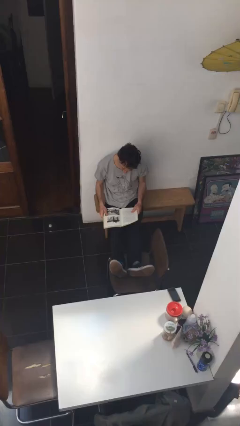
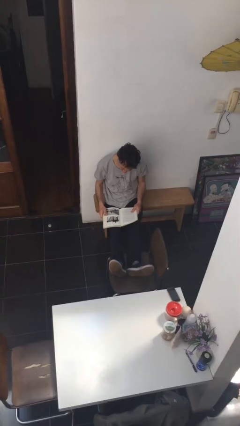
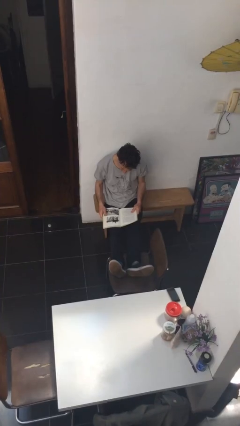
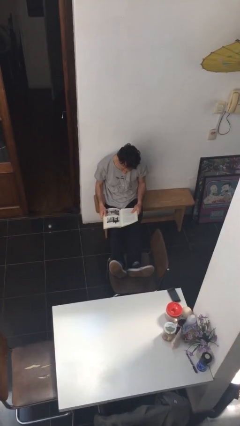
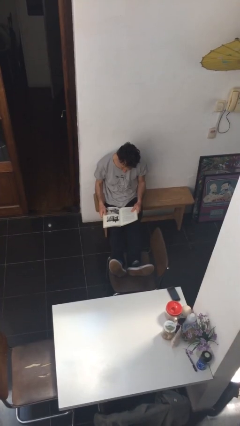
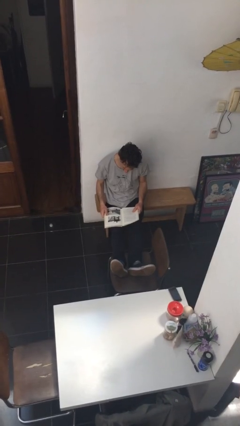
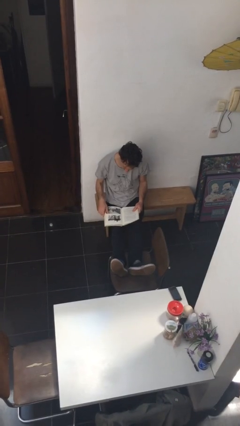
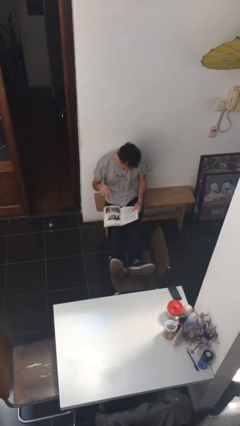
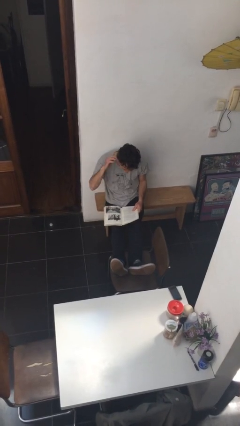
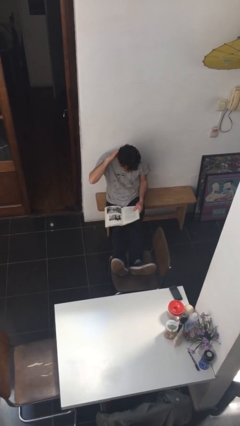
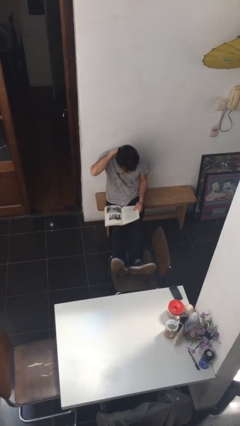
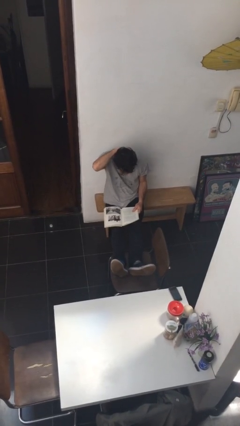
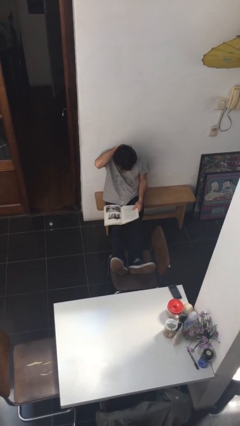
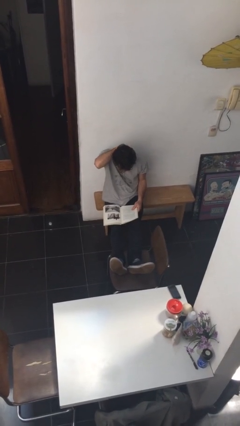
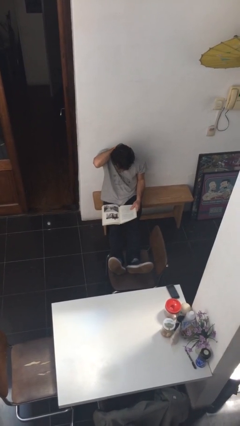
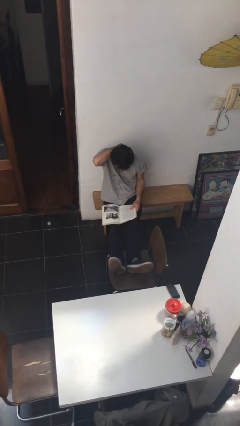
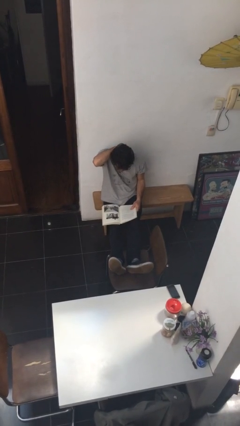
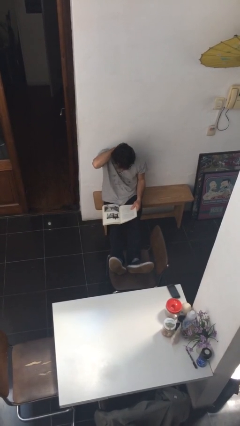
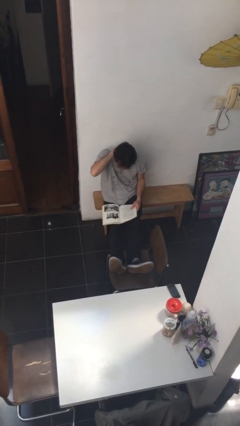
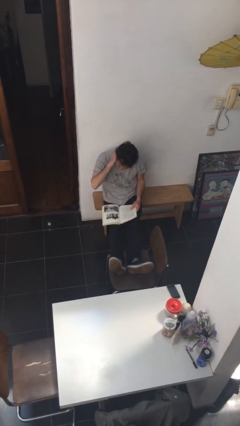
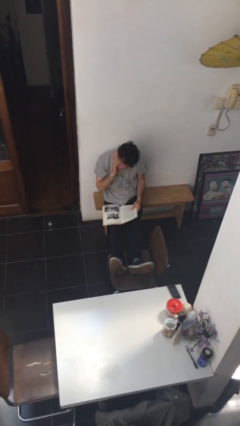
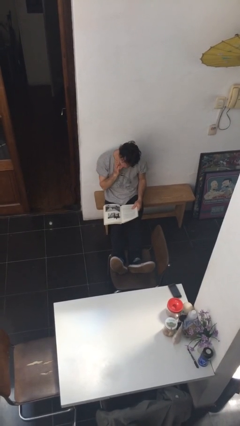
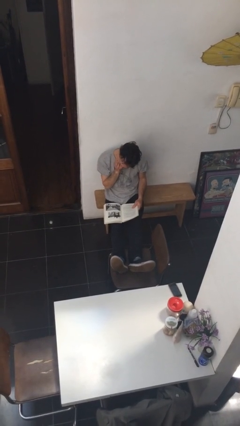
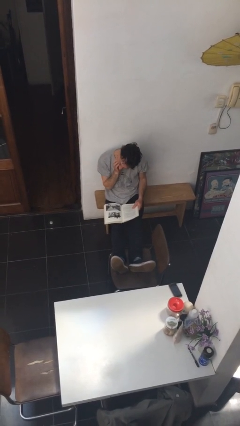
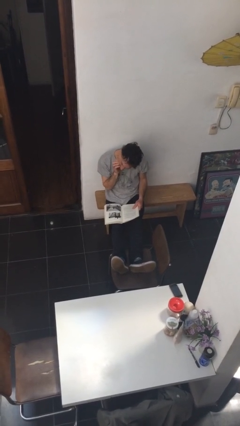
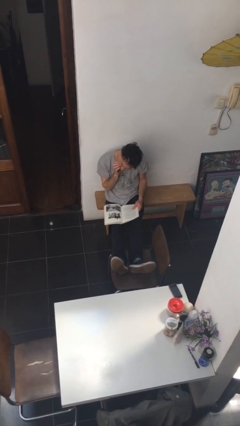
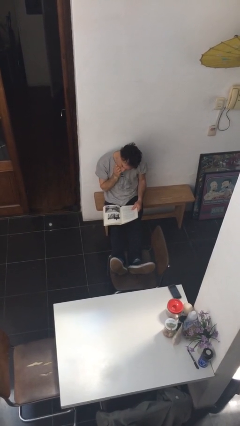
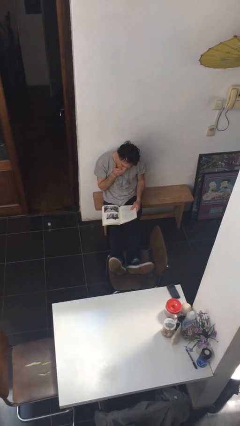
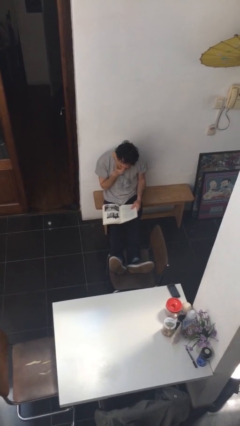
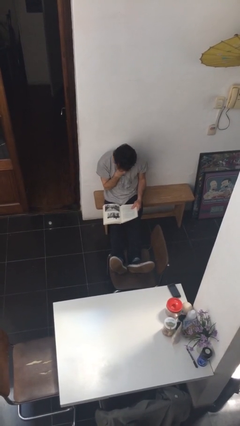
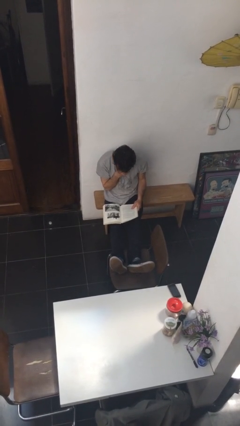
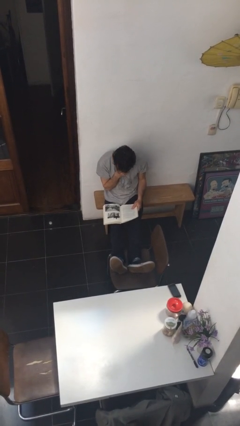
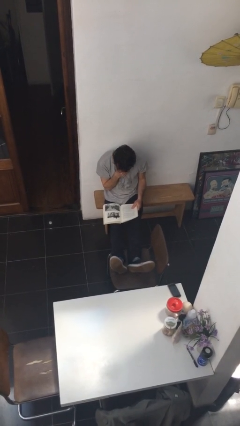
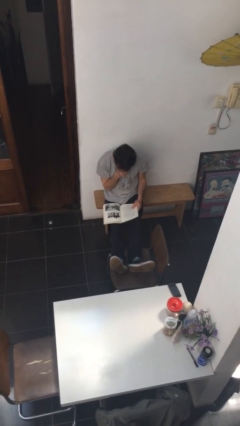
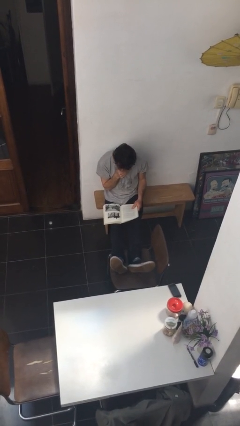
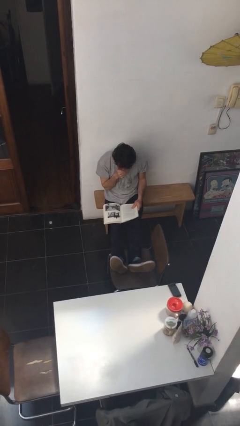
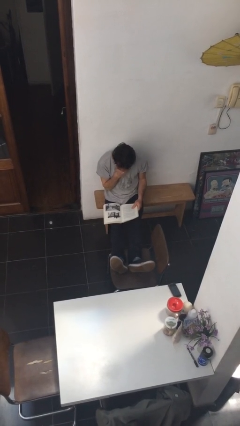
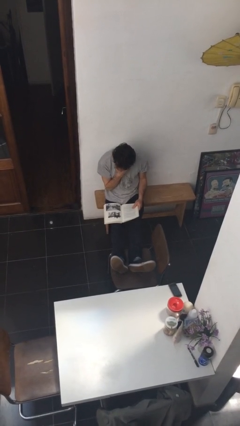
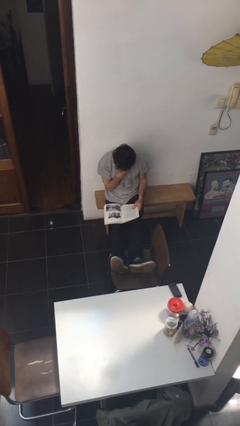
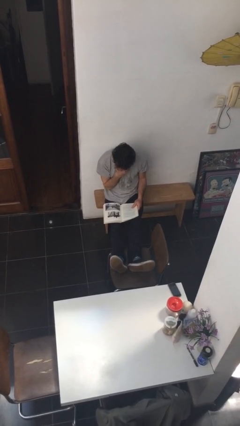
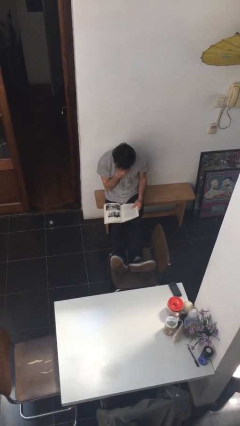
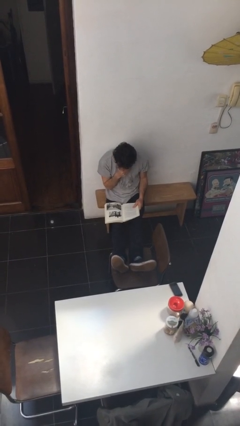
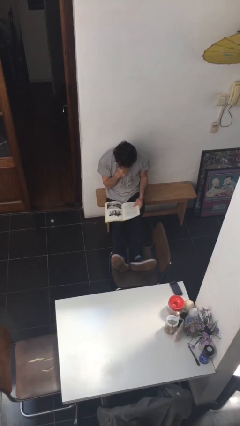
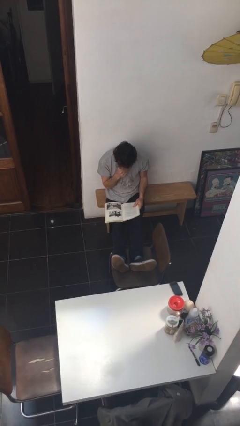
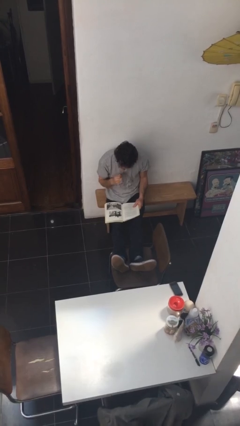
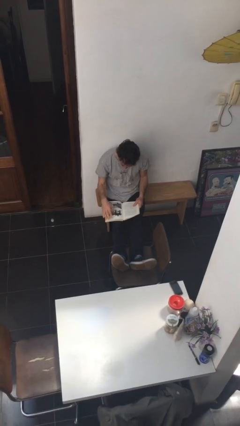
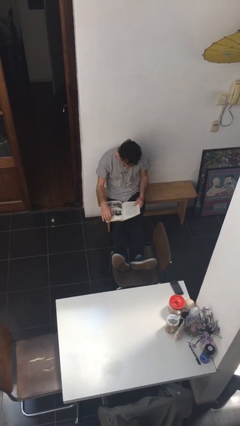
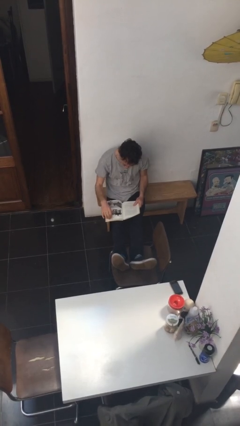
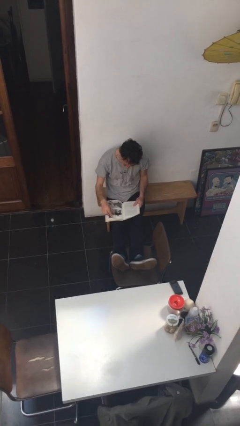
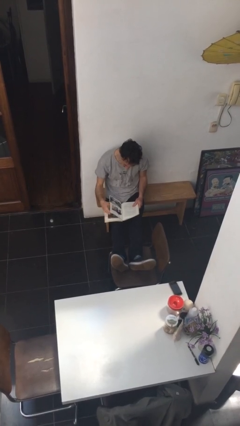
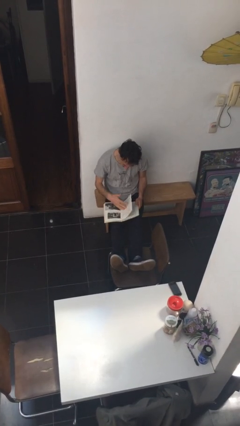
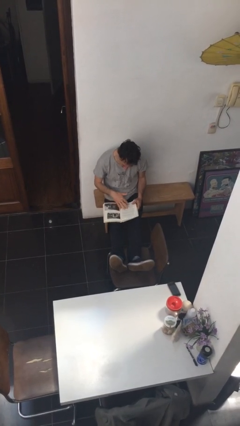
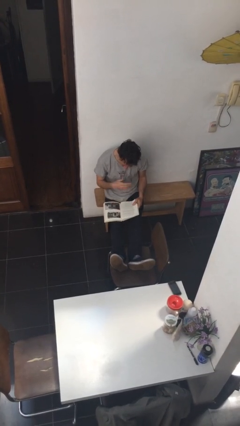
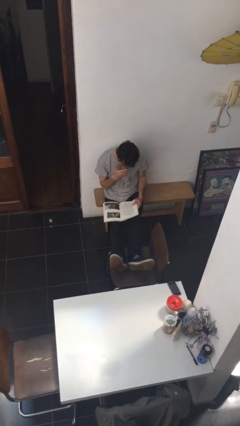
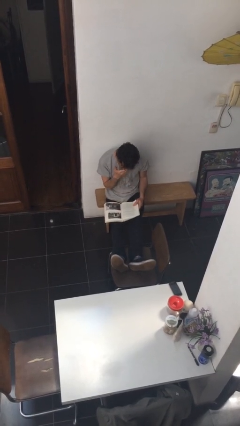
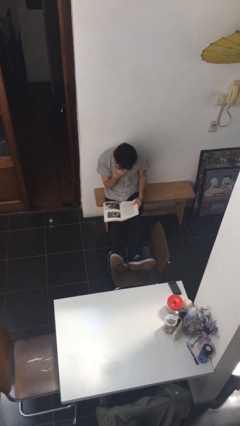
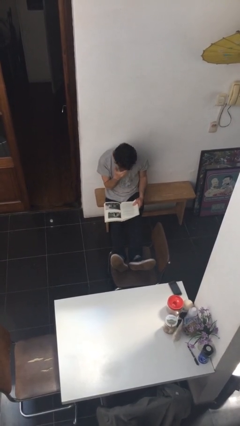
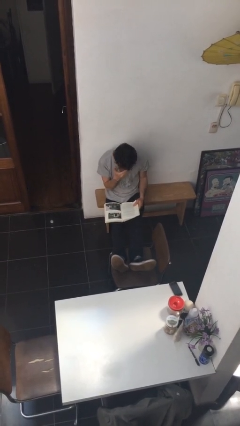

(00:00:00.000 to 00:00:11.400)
person reads document

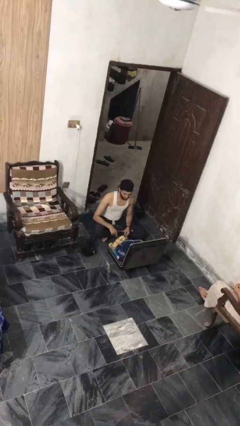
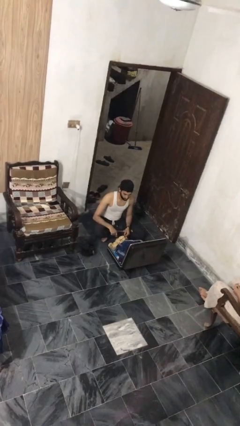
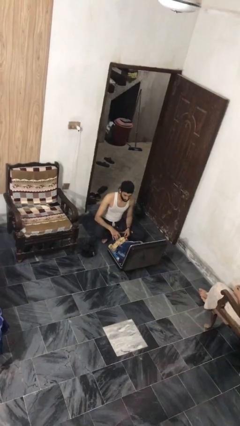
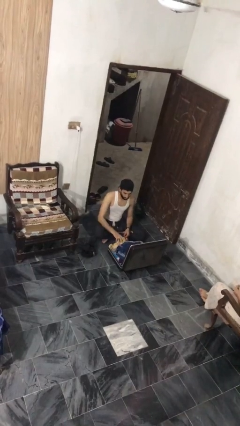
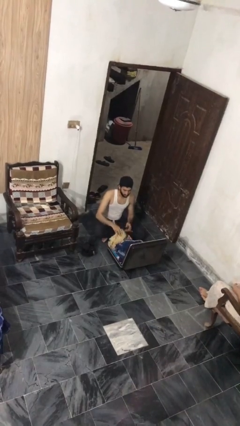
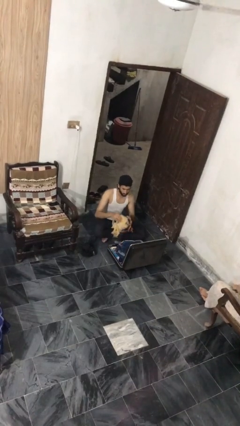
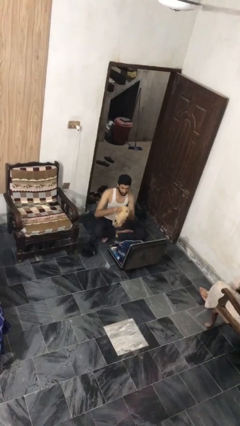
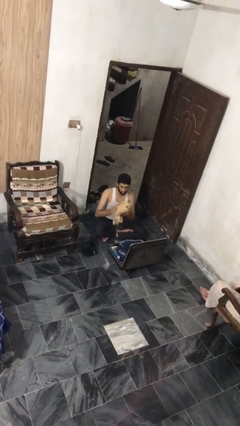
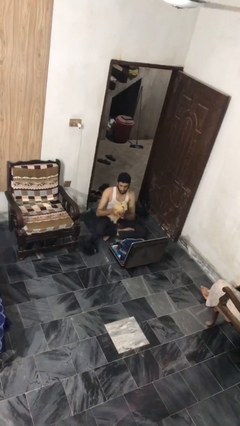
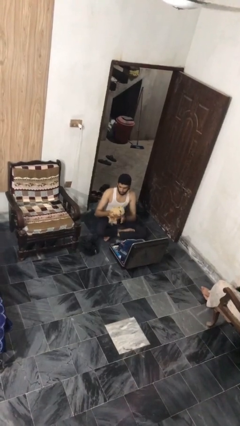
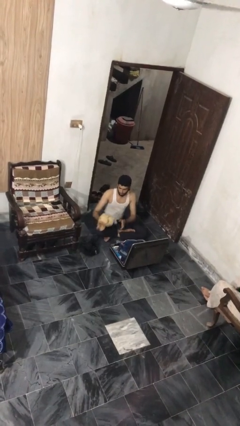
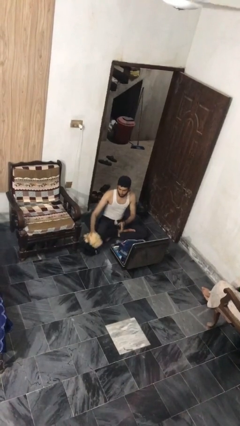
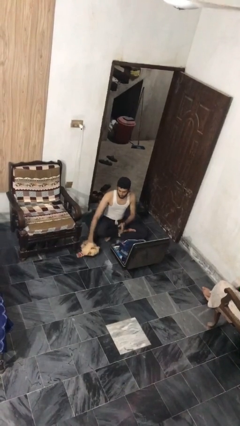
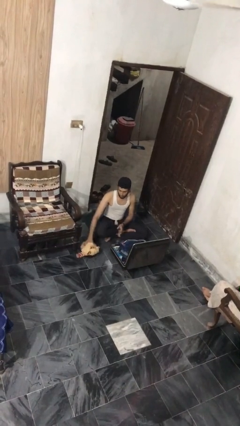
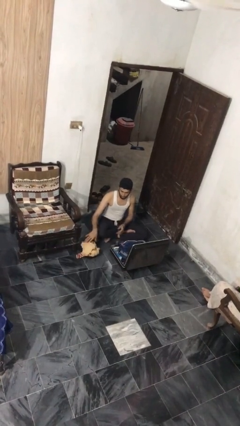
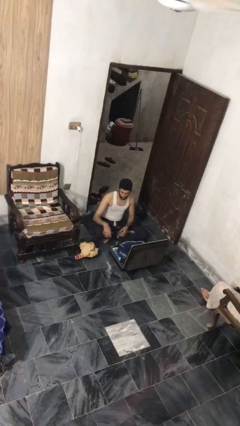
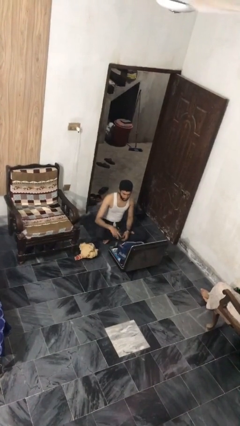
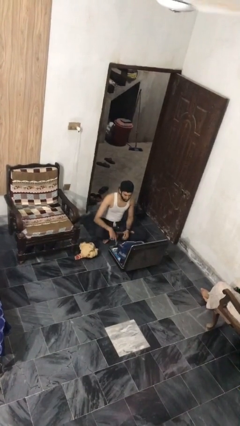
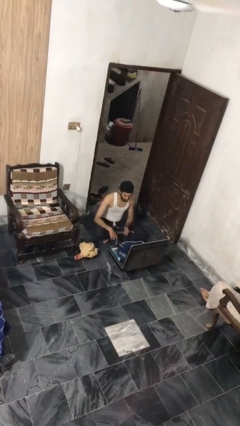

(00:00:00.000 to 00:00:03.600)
person unloads clothes from suitcase

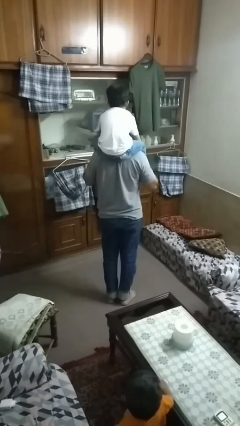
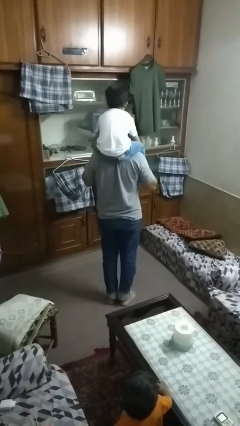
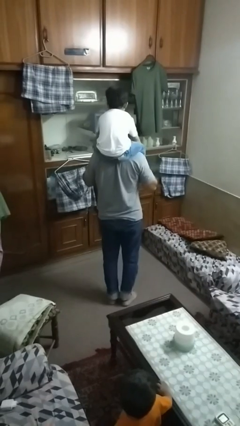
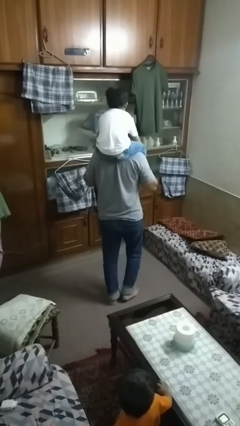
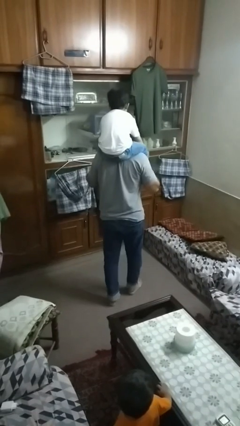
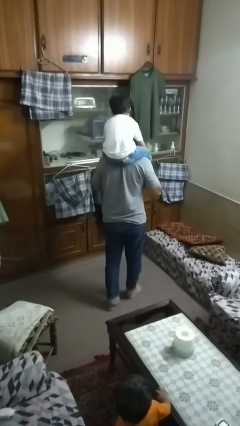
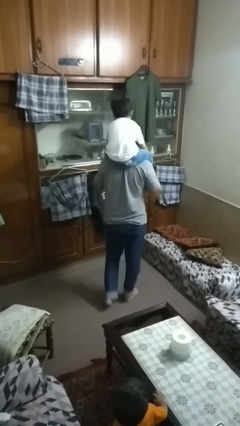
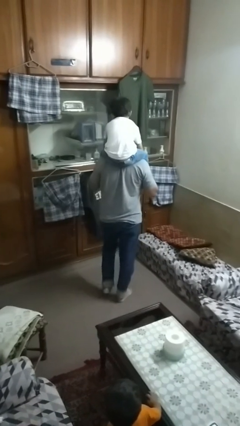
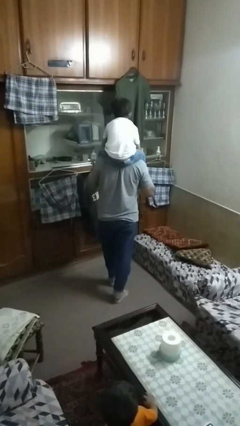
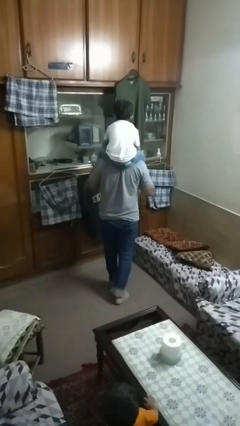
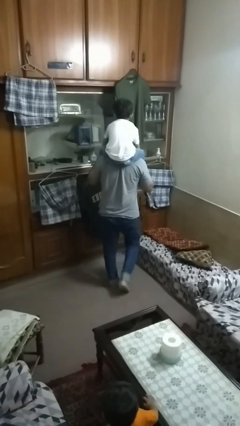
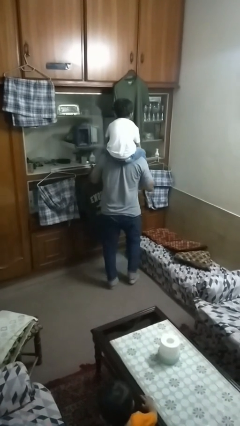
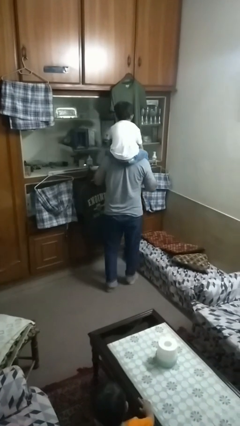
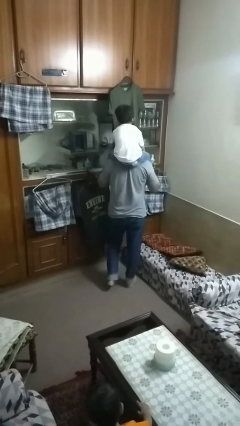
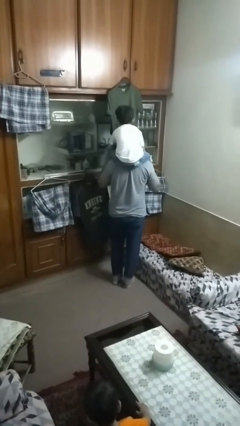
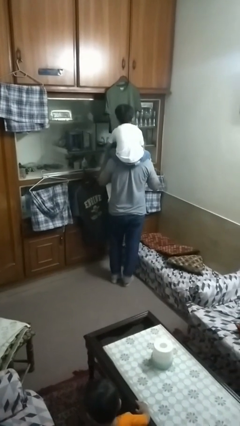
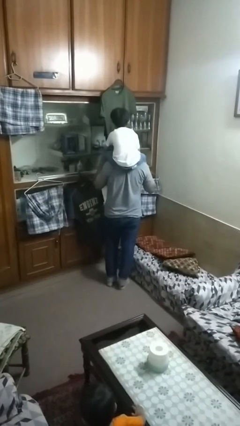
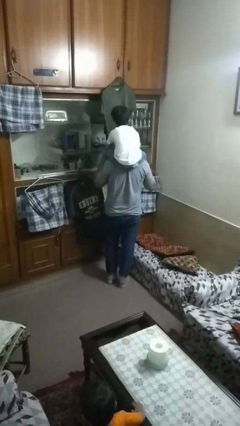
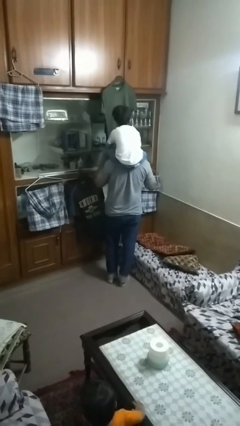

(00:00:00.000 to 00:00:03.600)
person carries person on shoulders
